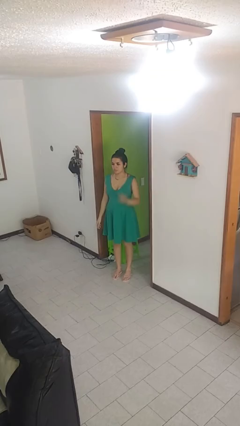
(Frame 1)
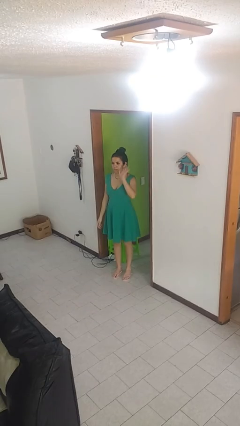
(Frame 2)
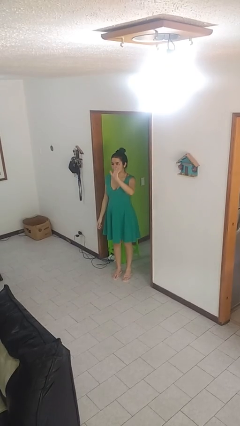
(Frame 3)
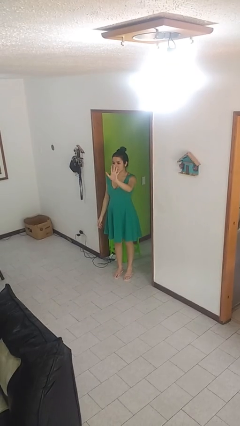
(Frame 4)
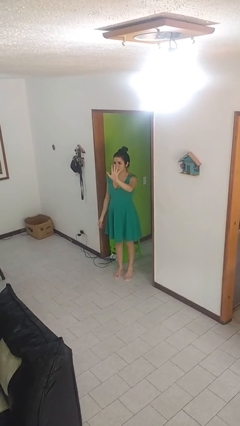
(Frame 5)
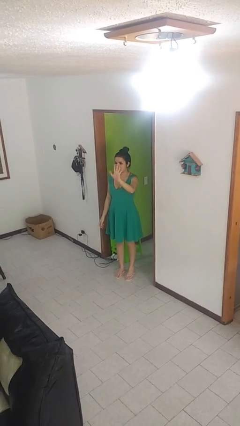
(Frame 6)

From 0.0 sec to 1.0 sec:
person gestures number five

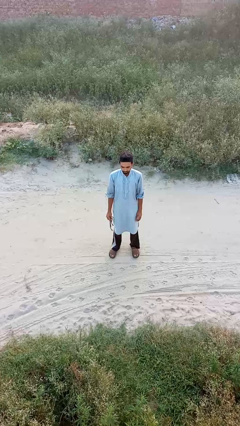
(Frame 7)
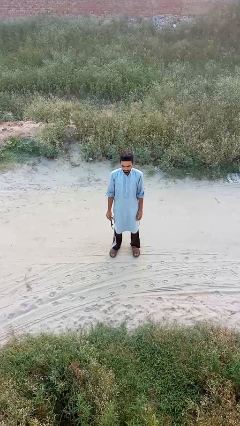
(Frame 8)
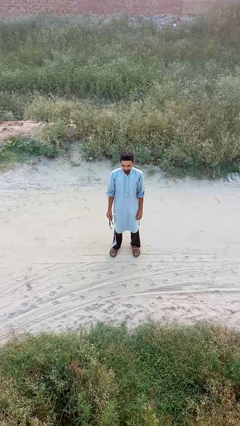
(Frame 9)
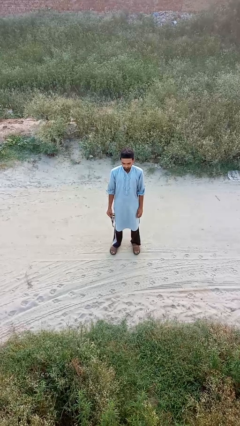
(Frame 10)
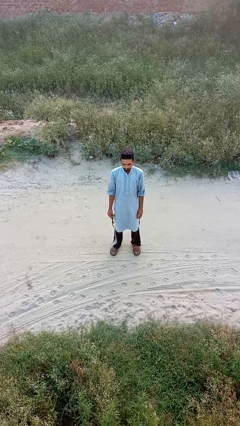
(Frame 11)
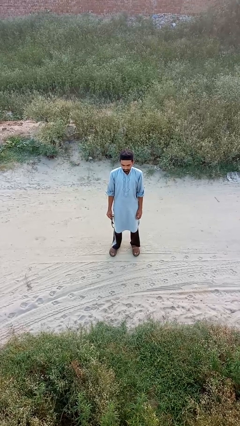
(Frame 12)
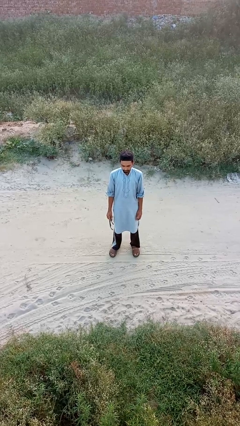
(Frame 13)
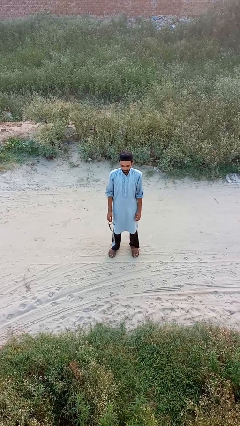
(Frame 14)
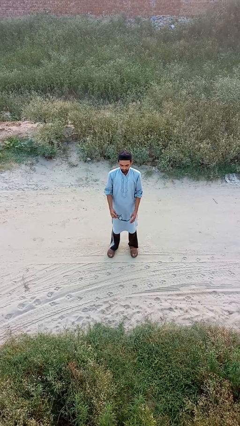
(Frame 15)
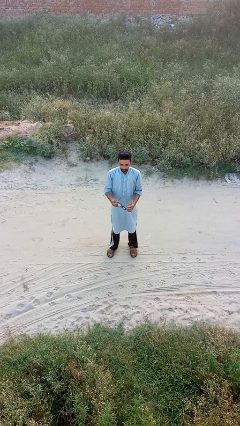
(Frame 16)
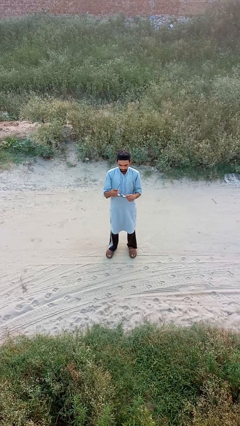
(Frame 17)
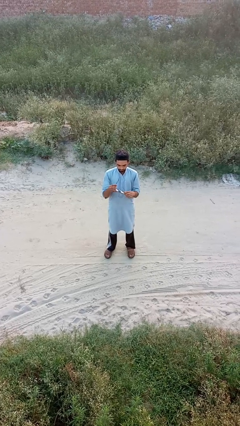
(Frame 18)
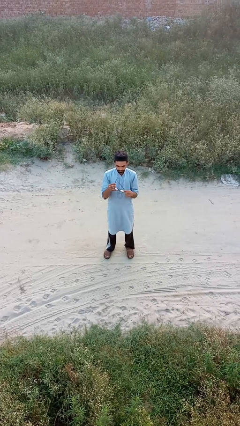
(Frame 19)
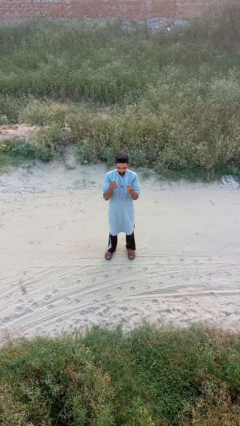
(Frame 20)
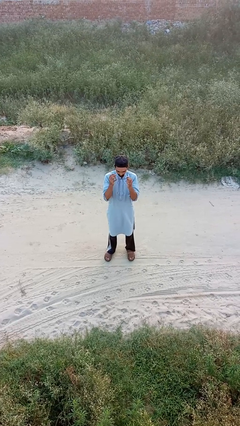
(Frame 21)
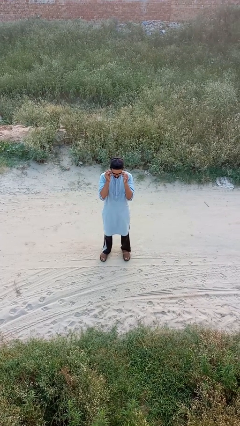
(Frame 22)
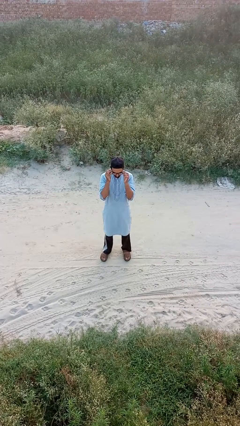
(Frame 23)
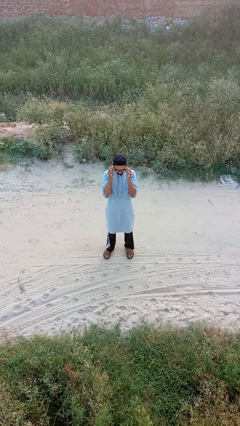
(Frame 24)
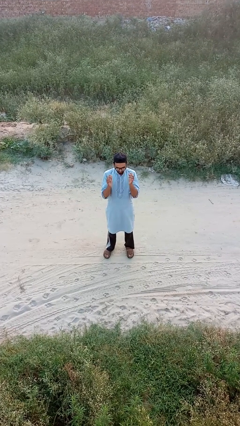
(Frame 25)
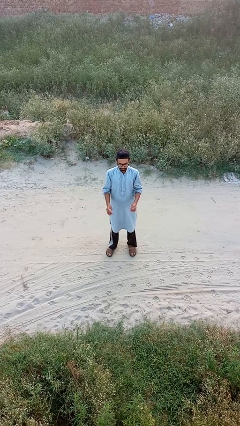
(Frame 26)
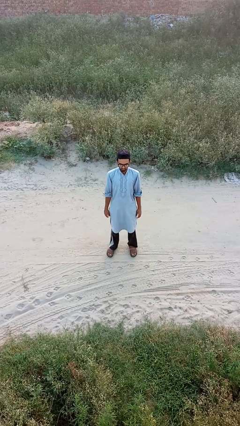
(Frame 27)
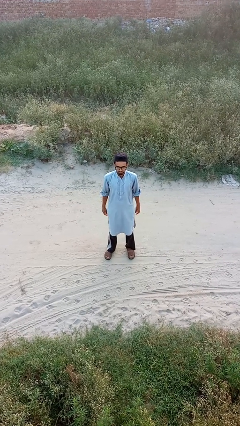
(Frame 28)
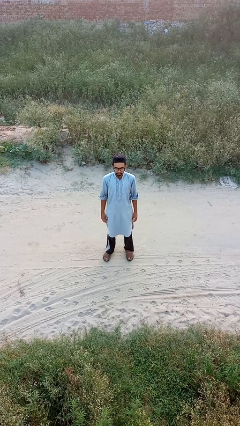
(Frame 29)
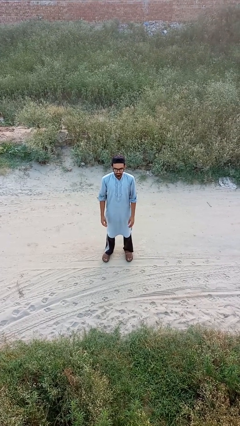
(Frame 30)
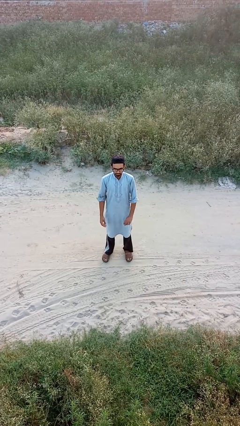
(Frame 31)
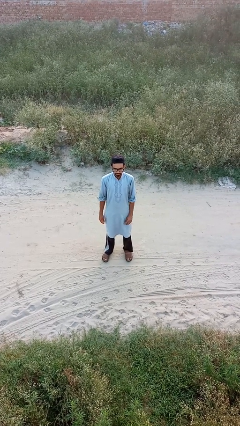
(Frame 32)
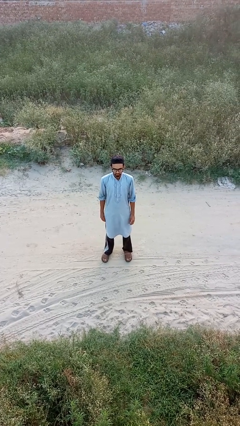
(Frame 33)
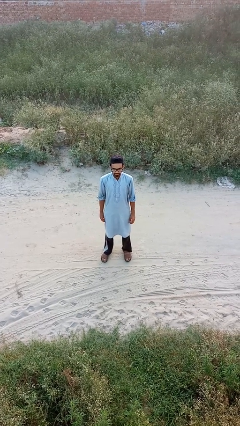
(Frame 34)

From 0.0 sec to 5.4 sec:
person puts on glasses

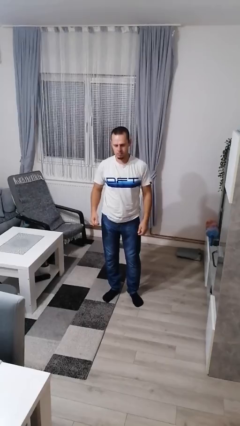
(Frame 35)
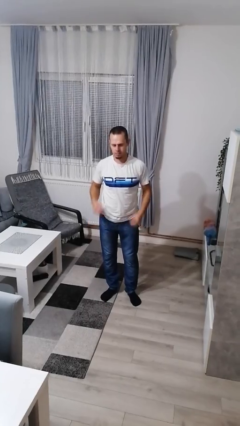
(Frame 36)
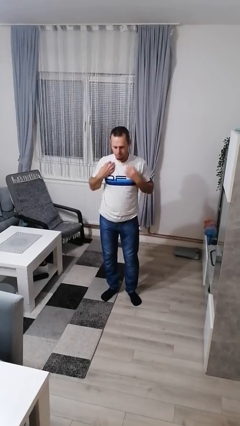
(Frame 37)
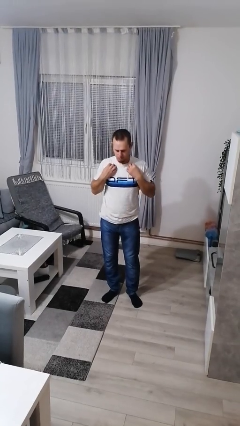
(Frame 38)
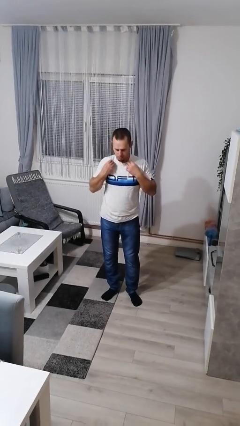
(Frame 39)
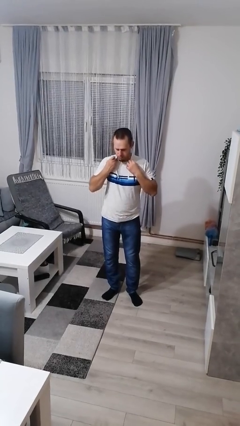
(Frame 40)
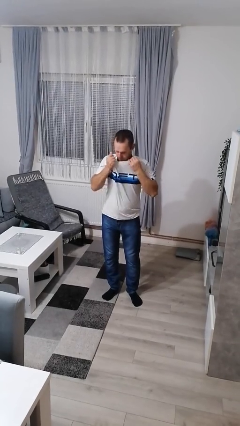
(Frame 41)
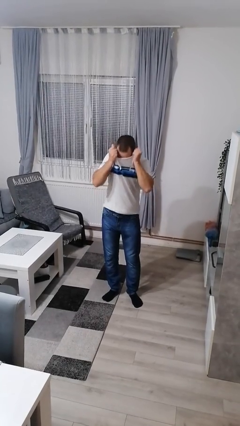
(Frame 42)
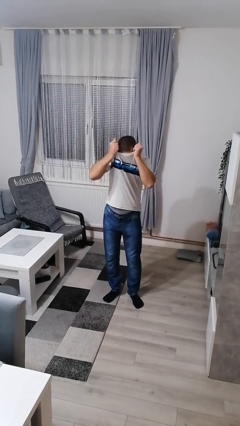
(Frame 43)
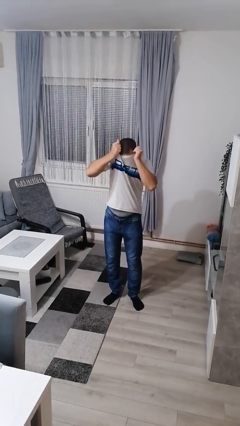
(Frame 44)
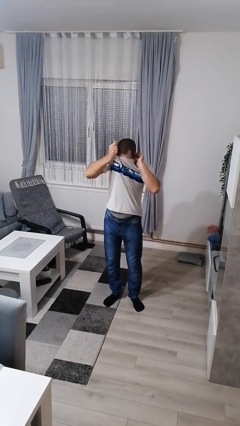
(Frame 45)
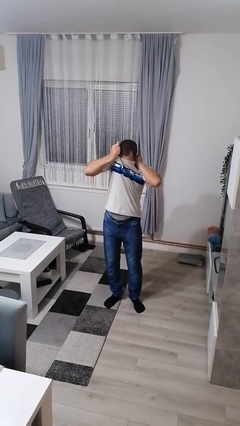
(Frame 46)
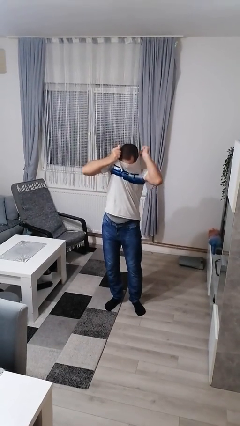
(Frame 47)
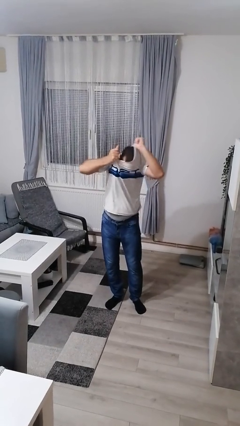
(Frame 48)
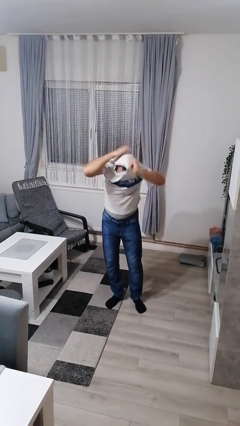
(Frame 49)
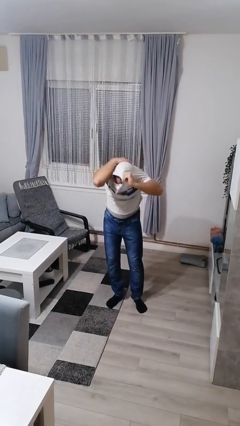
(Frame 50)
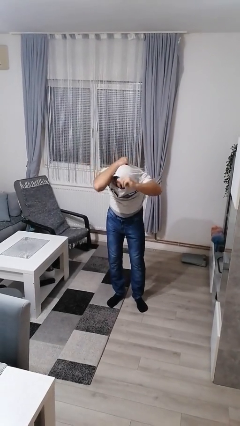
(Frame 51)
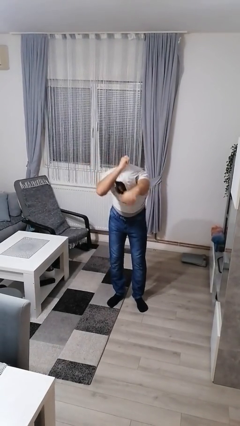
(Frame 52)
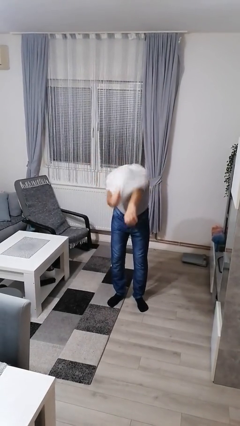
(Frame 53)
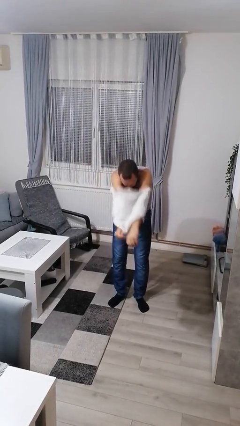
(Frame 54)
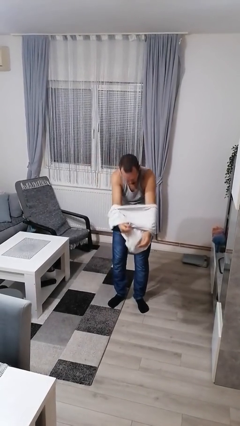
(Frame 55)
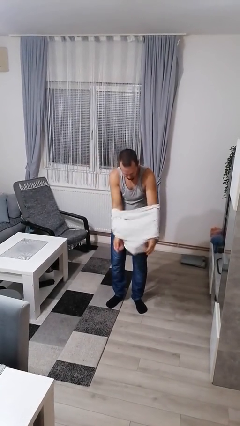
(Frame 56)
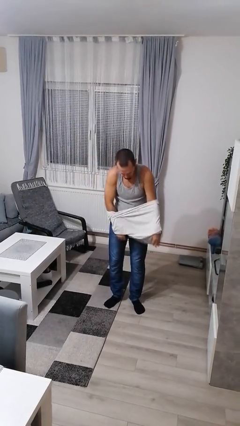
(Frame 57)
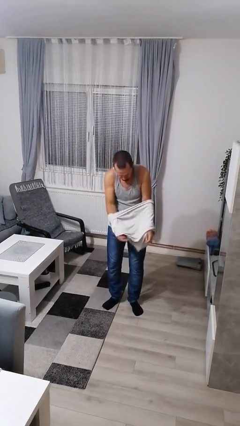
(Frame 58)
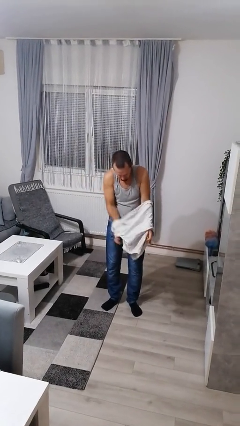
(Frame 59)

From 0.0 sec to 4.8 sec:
person takes off shirt

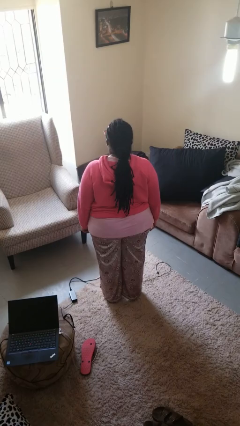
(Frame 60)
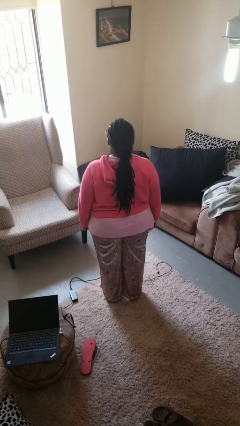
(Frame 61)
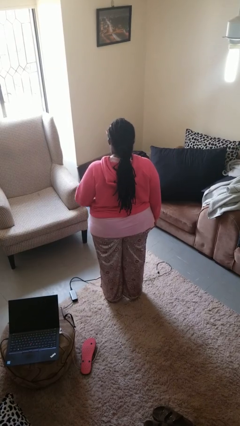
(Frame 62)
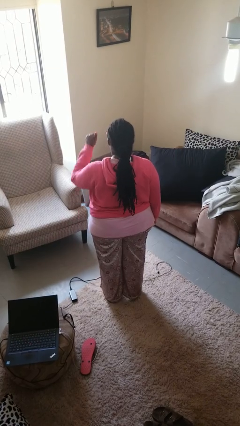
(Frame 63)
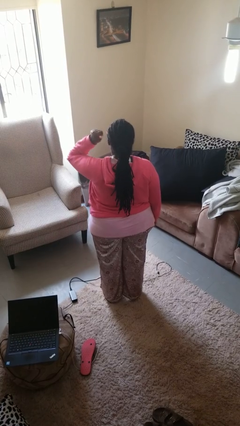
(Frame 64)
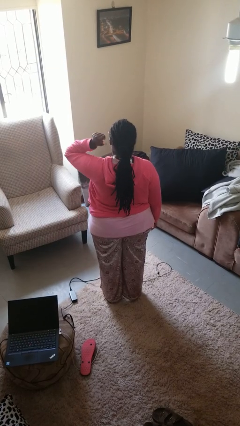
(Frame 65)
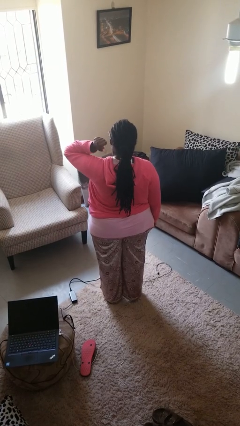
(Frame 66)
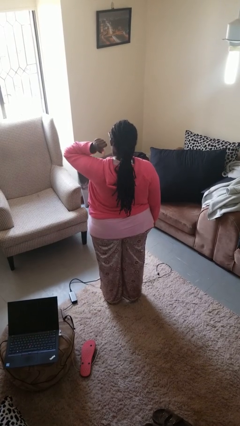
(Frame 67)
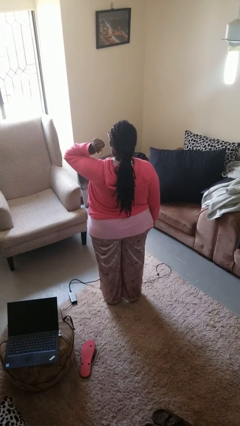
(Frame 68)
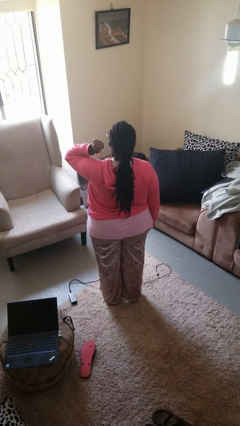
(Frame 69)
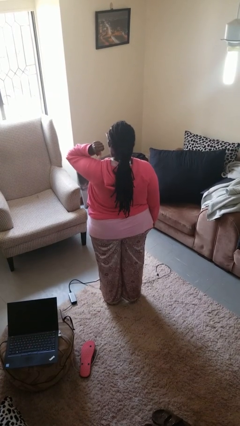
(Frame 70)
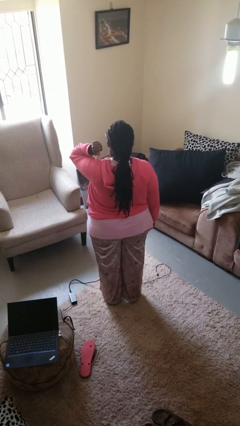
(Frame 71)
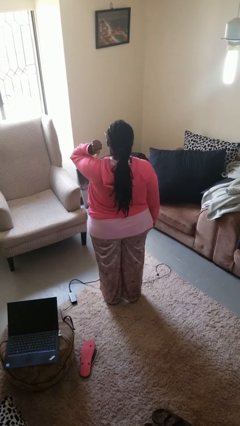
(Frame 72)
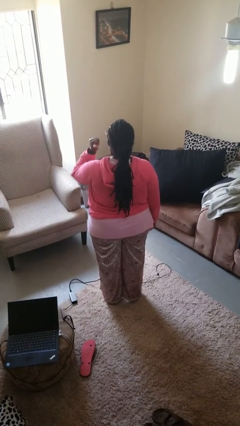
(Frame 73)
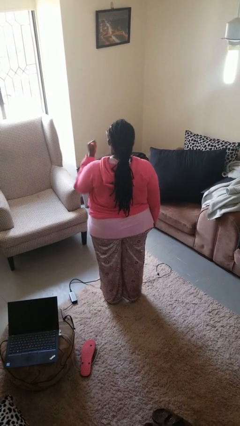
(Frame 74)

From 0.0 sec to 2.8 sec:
person gestures behind me

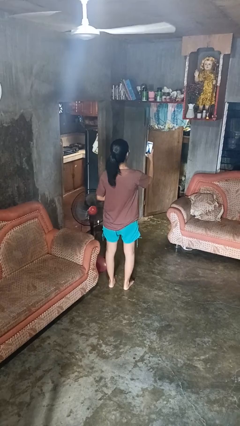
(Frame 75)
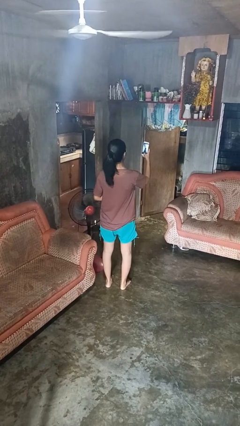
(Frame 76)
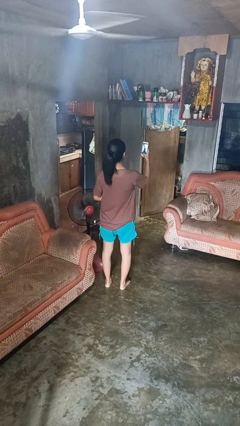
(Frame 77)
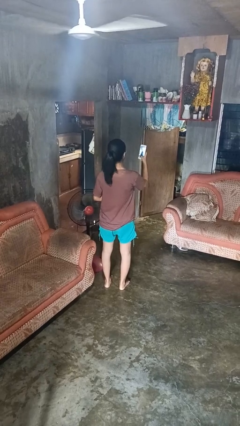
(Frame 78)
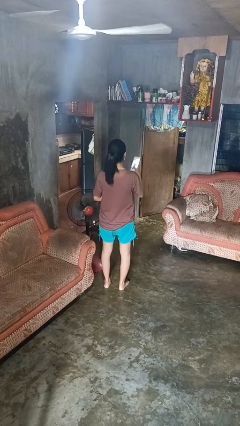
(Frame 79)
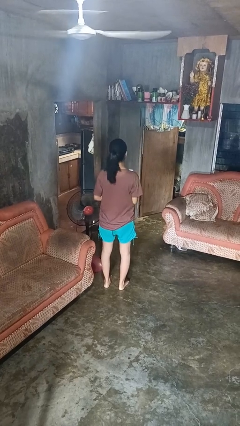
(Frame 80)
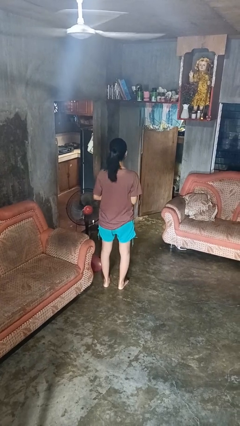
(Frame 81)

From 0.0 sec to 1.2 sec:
person takes selfie

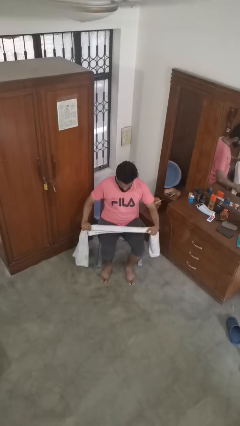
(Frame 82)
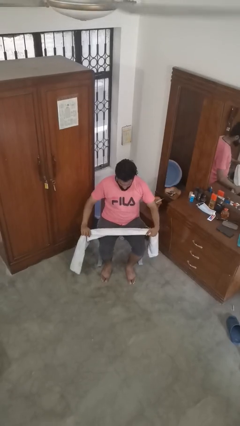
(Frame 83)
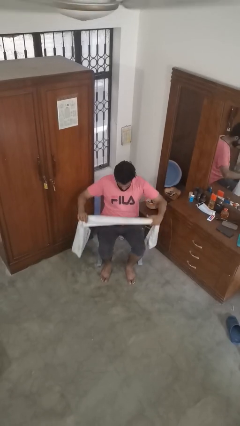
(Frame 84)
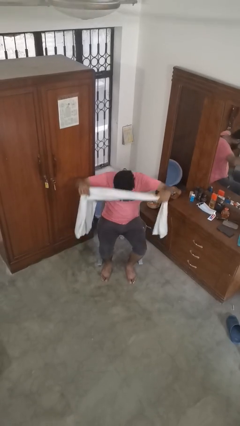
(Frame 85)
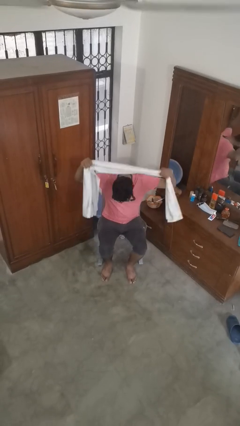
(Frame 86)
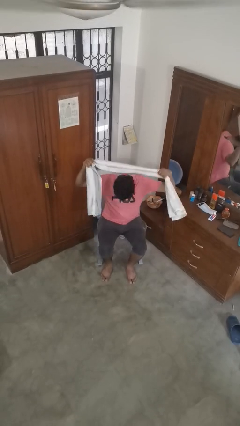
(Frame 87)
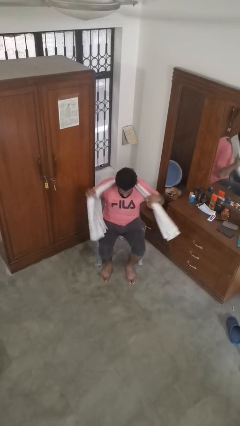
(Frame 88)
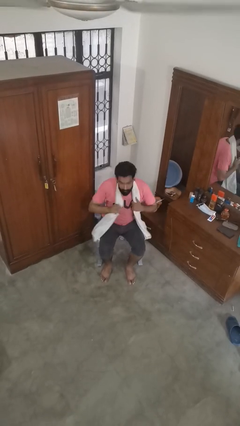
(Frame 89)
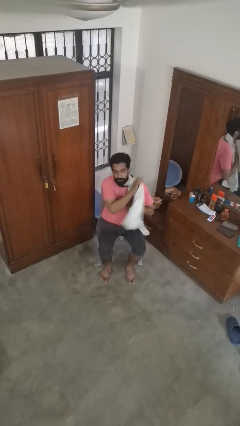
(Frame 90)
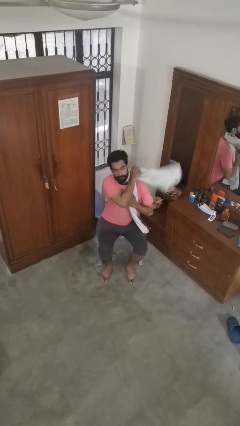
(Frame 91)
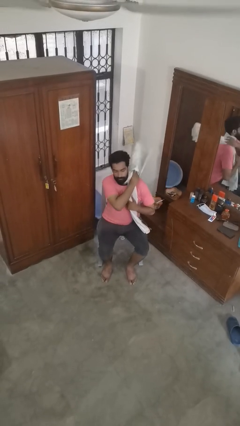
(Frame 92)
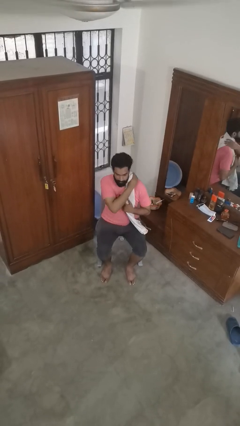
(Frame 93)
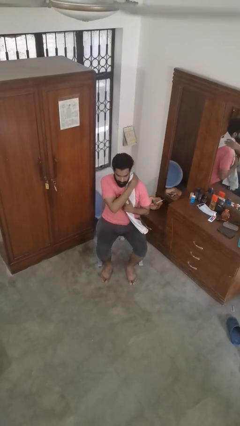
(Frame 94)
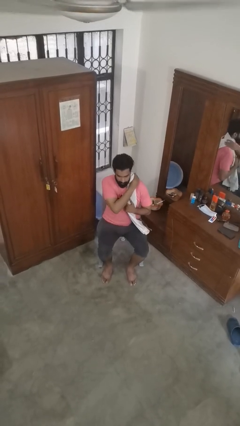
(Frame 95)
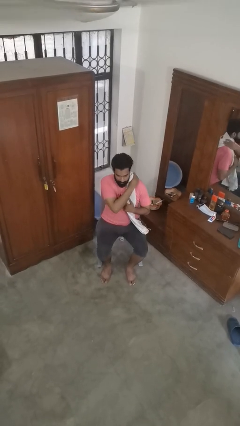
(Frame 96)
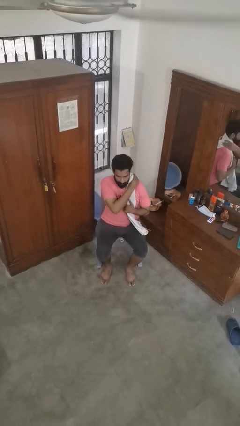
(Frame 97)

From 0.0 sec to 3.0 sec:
person puts on scarf
